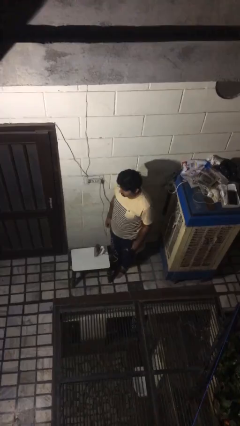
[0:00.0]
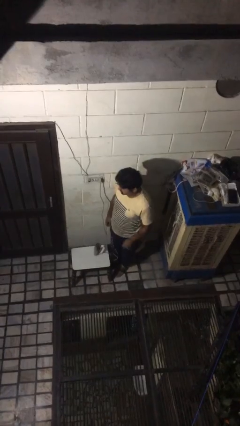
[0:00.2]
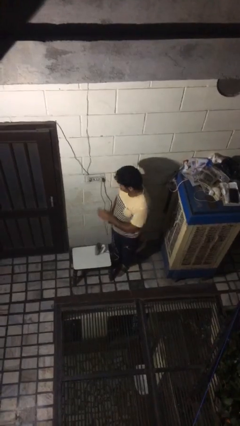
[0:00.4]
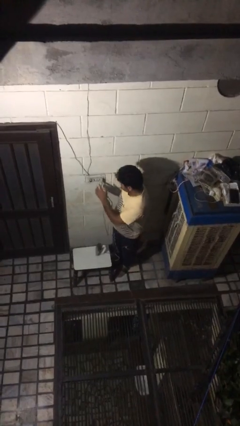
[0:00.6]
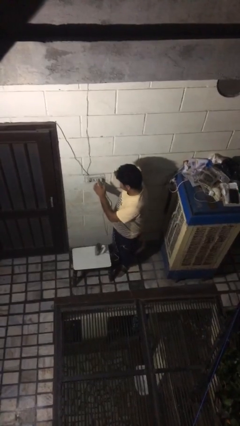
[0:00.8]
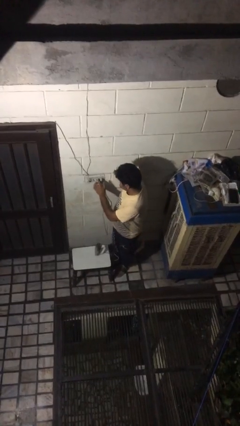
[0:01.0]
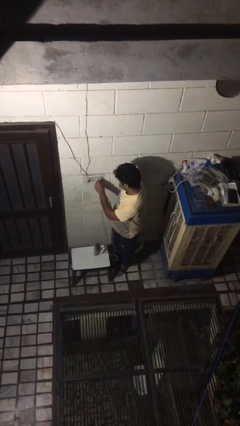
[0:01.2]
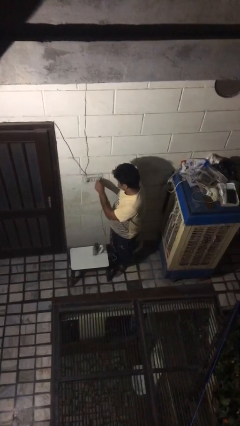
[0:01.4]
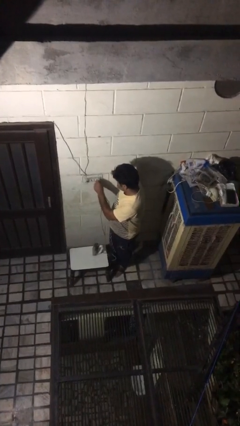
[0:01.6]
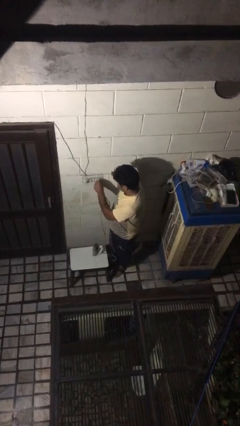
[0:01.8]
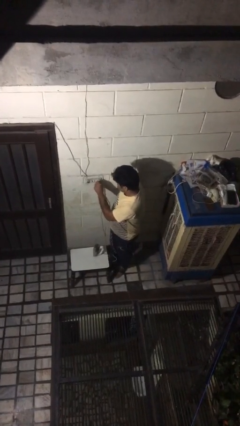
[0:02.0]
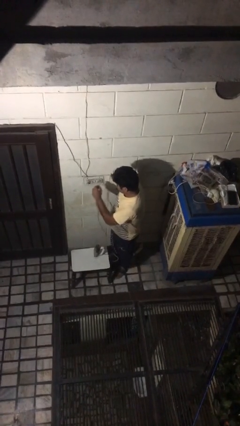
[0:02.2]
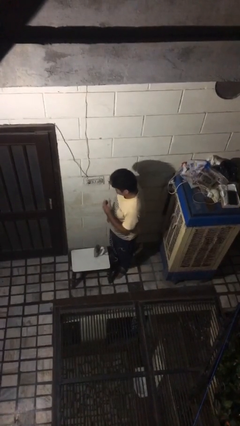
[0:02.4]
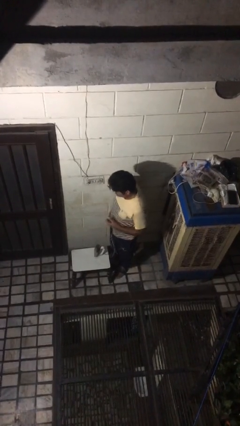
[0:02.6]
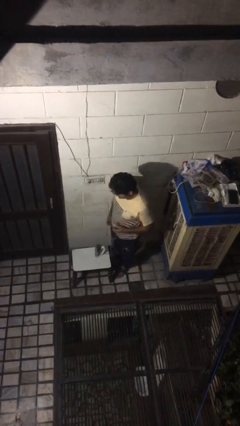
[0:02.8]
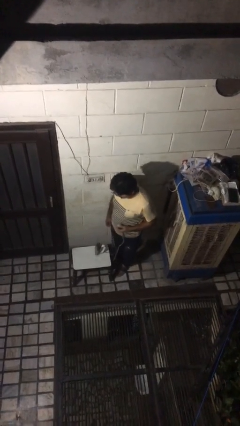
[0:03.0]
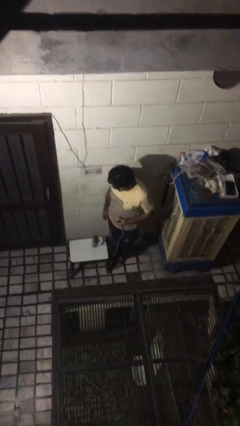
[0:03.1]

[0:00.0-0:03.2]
person unplugs from electrical socket

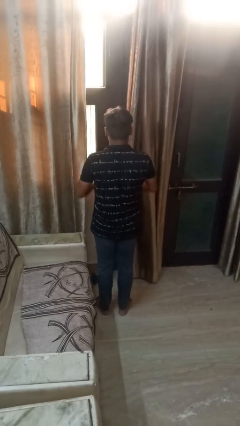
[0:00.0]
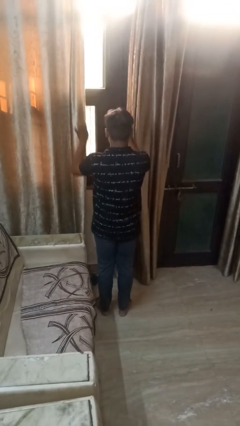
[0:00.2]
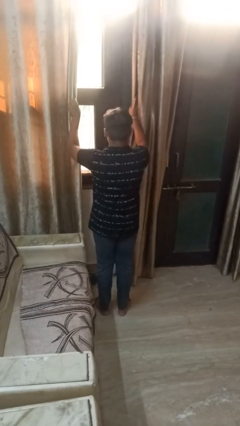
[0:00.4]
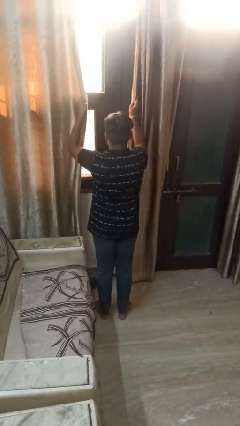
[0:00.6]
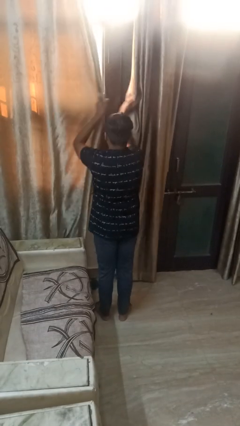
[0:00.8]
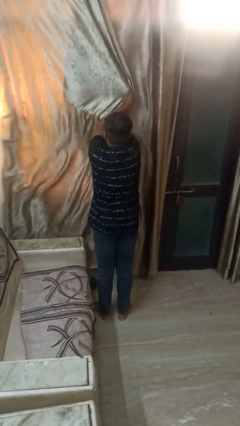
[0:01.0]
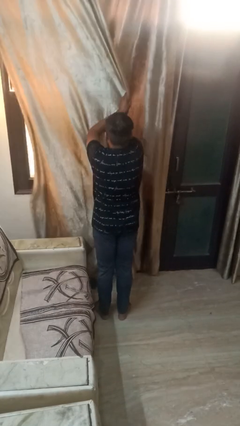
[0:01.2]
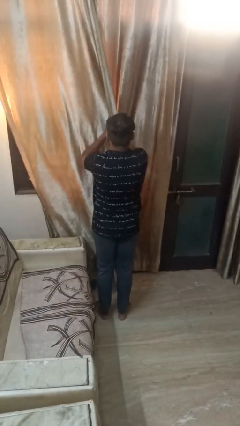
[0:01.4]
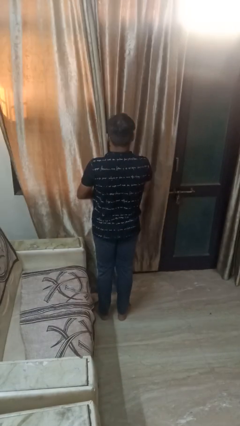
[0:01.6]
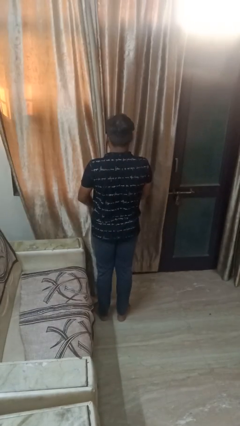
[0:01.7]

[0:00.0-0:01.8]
person closes curtains

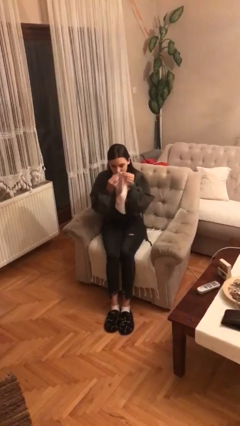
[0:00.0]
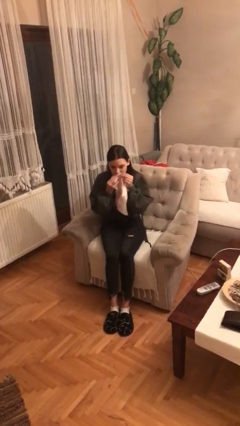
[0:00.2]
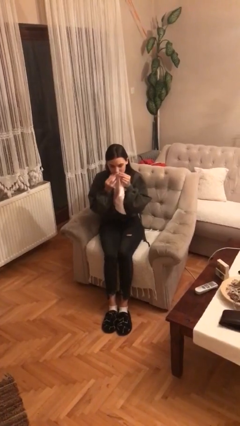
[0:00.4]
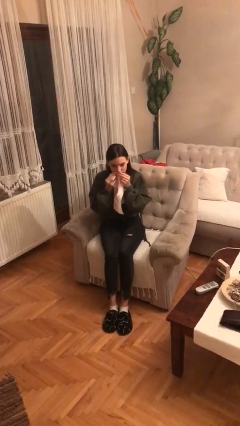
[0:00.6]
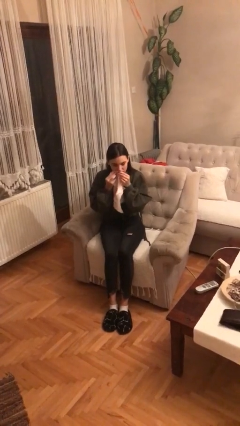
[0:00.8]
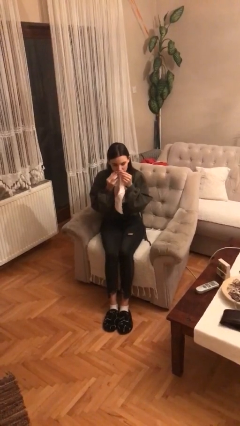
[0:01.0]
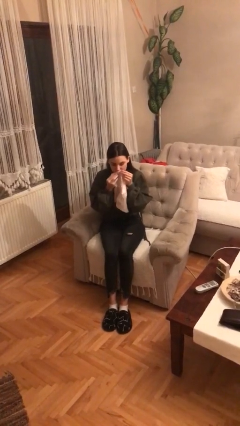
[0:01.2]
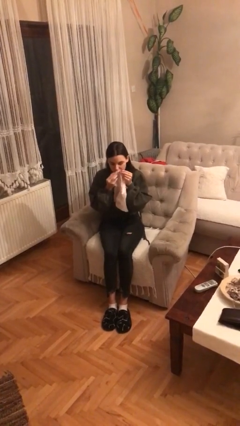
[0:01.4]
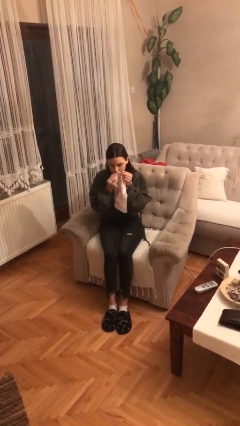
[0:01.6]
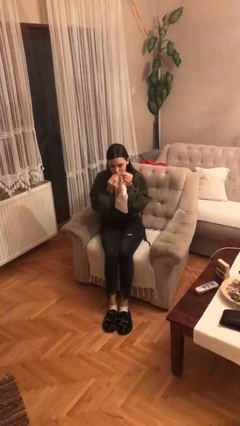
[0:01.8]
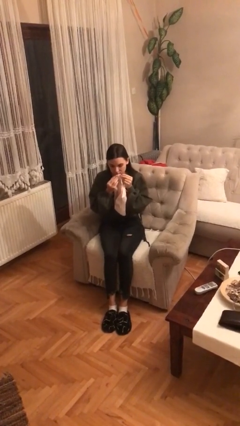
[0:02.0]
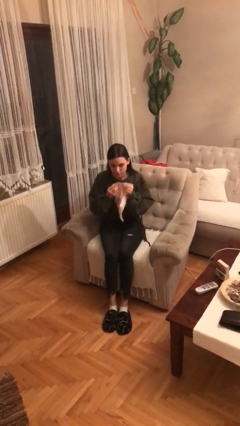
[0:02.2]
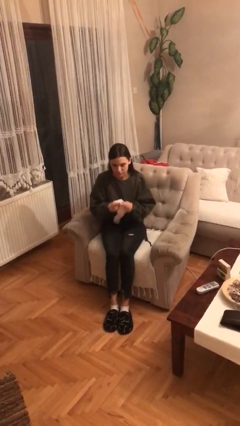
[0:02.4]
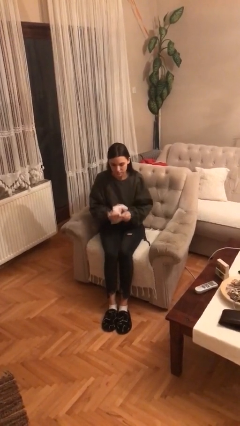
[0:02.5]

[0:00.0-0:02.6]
person wipes mouth with napkin

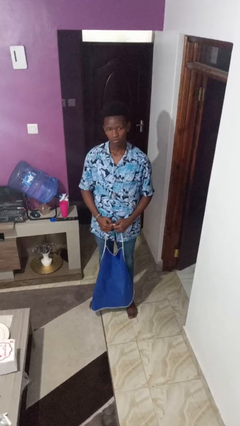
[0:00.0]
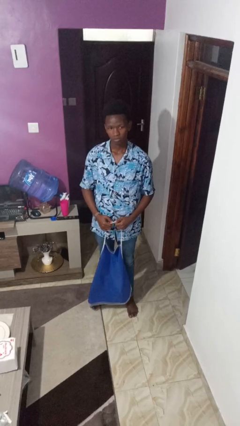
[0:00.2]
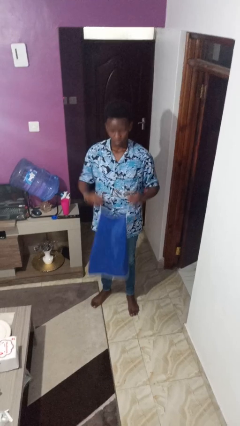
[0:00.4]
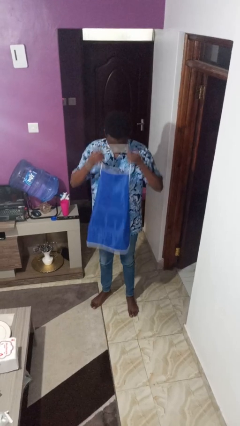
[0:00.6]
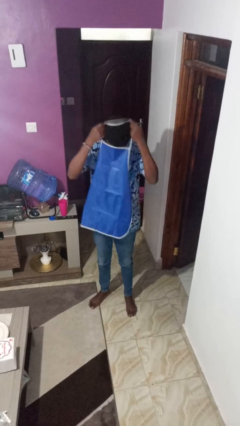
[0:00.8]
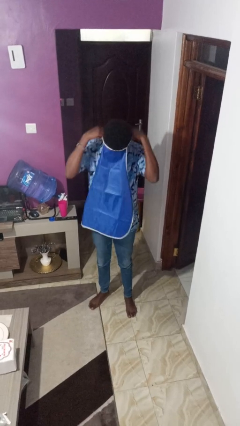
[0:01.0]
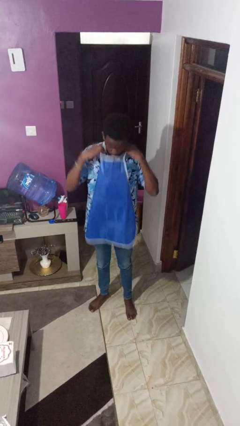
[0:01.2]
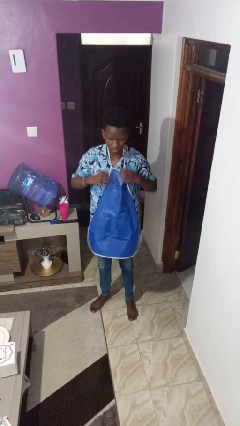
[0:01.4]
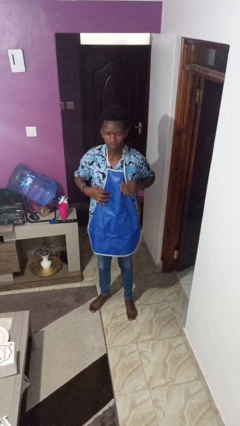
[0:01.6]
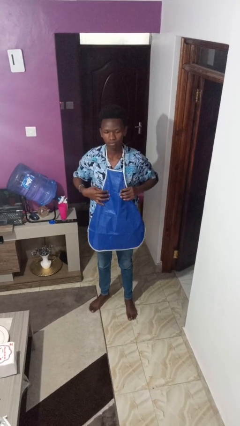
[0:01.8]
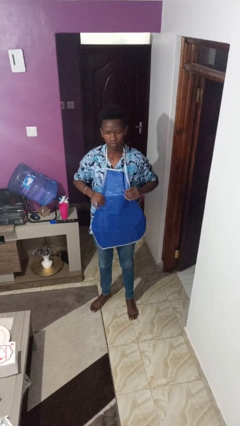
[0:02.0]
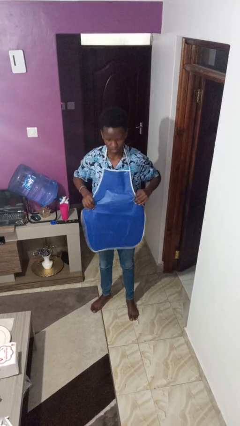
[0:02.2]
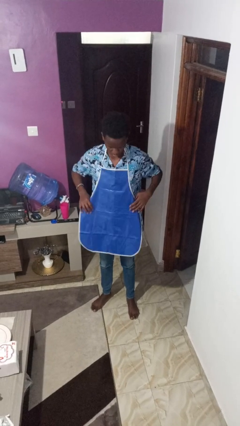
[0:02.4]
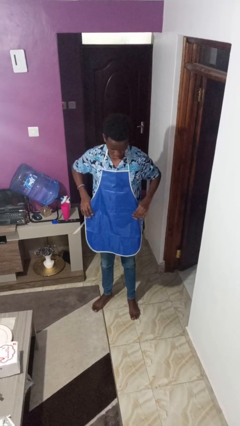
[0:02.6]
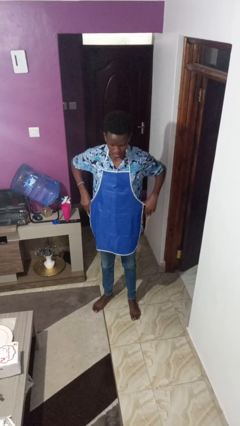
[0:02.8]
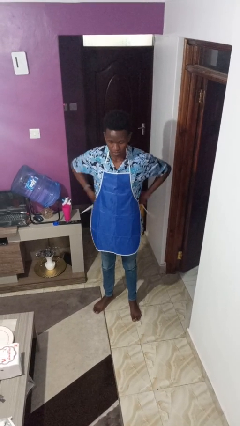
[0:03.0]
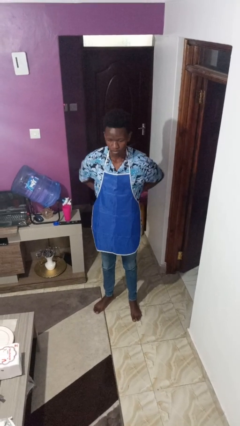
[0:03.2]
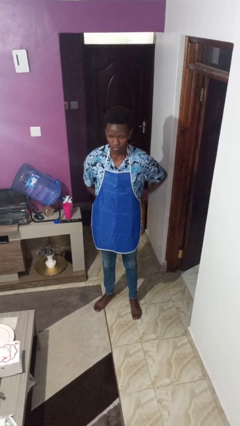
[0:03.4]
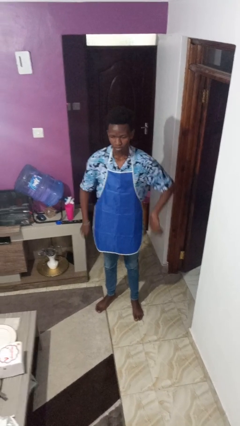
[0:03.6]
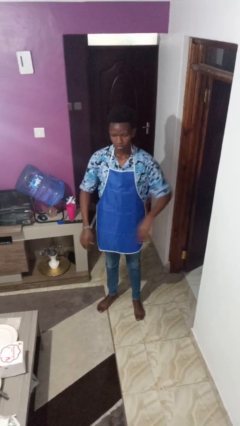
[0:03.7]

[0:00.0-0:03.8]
person puts on apron

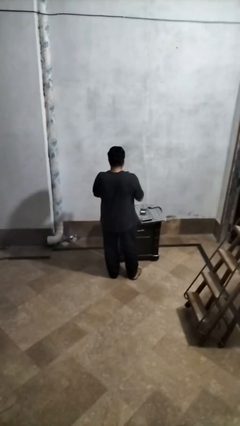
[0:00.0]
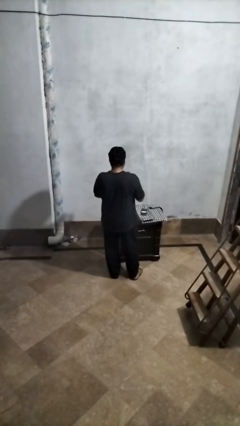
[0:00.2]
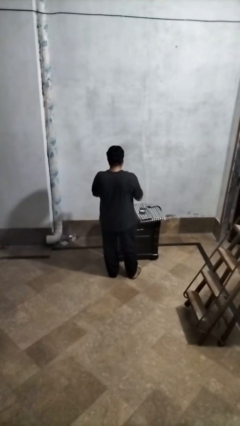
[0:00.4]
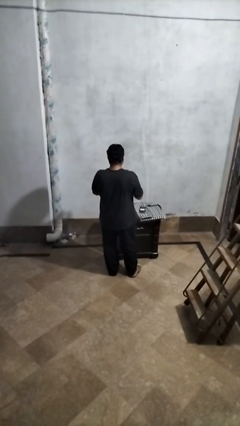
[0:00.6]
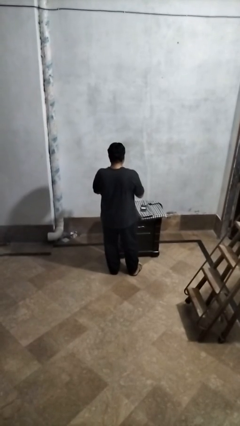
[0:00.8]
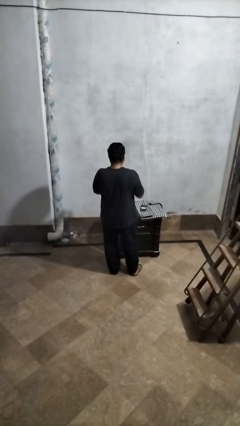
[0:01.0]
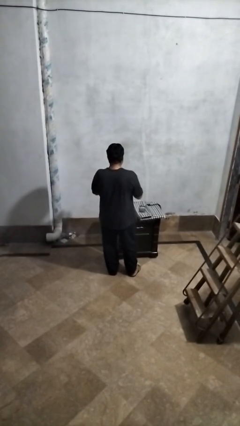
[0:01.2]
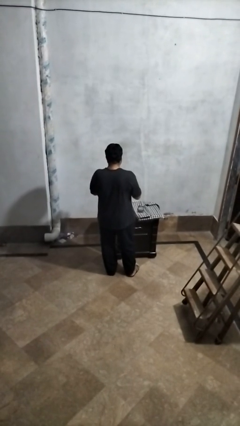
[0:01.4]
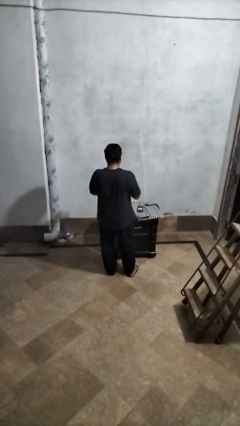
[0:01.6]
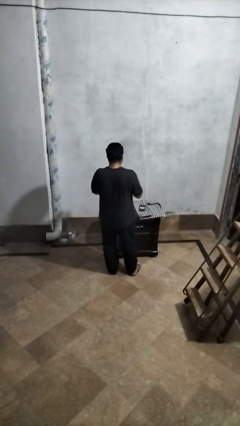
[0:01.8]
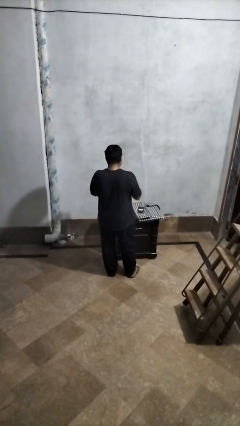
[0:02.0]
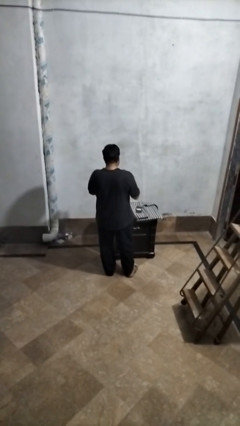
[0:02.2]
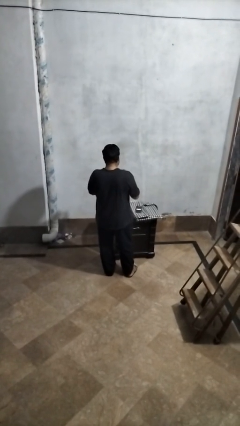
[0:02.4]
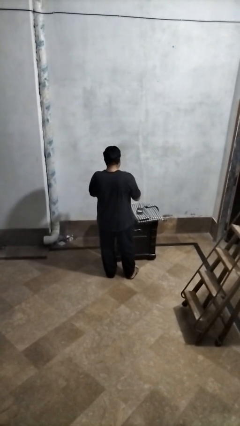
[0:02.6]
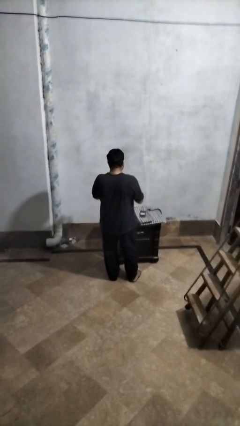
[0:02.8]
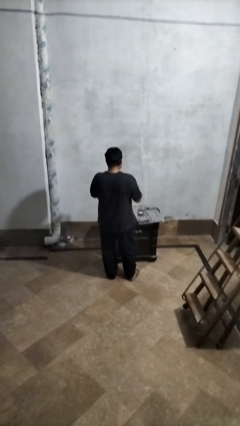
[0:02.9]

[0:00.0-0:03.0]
person clips fingernails

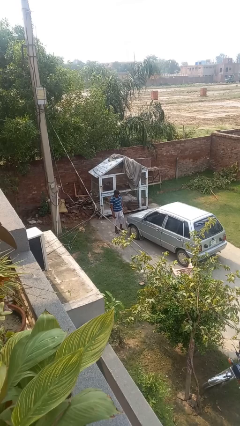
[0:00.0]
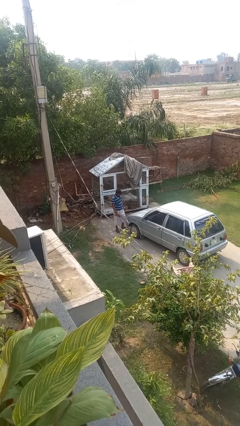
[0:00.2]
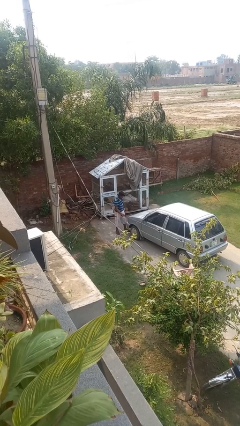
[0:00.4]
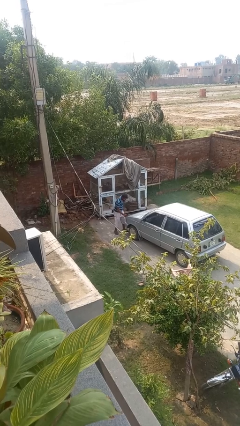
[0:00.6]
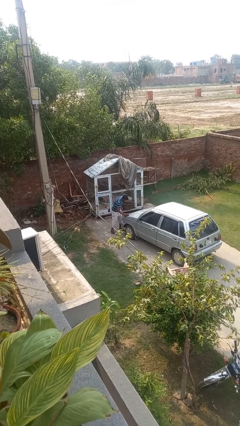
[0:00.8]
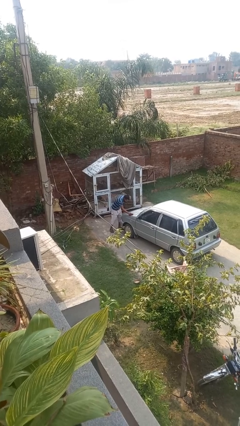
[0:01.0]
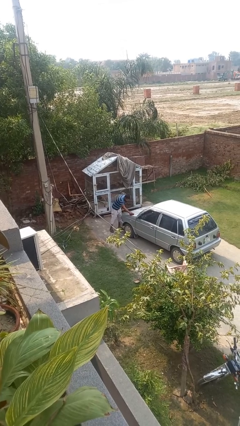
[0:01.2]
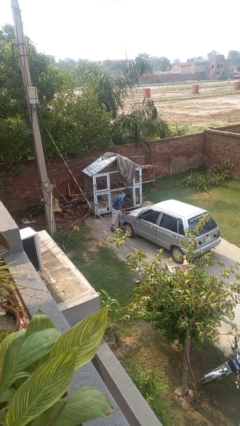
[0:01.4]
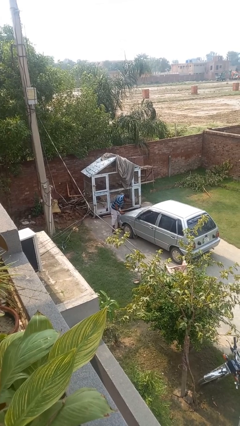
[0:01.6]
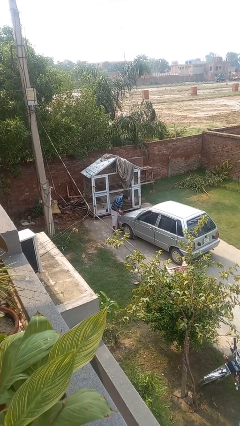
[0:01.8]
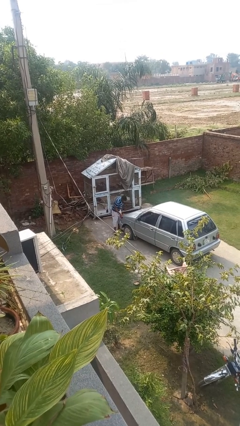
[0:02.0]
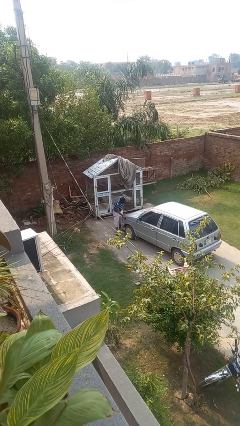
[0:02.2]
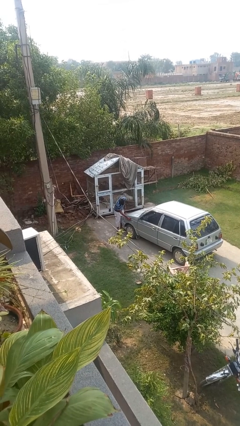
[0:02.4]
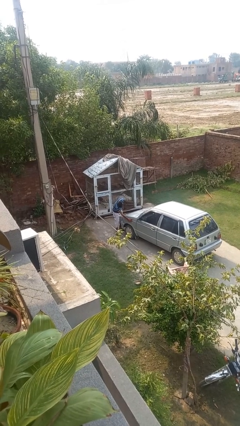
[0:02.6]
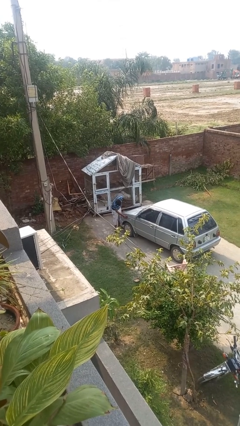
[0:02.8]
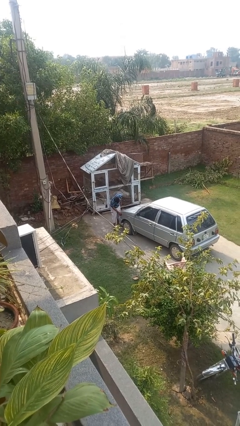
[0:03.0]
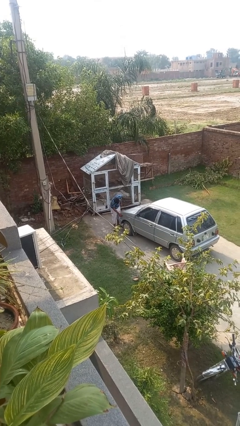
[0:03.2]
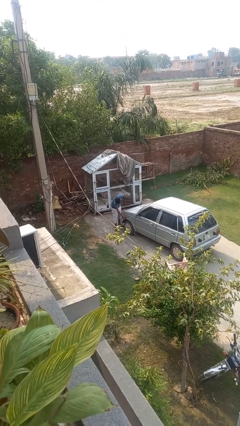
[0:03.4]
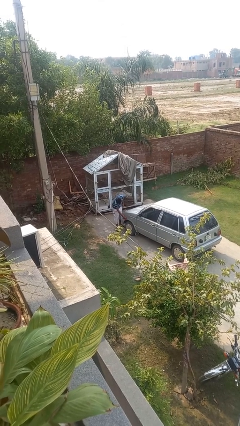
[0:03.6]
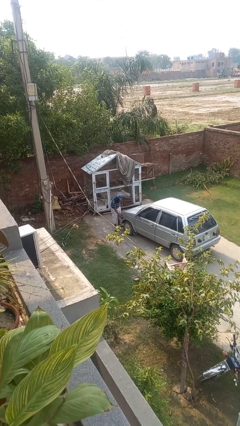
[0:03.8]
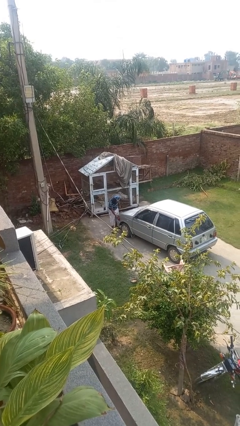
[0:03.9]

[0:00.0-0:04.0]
person polishes car with rag
